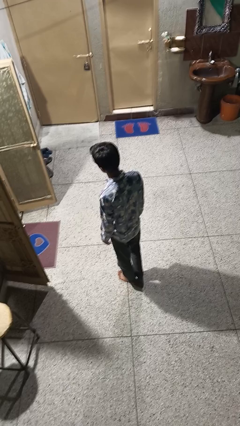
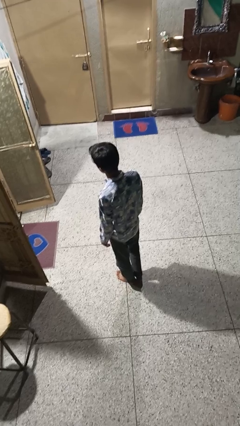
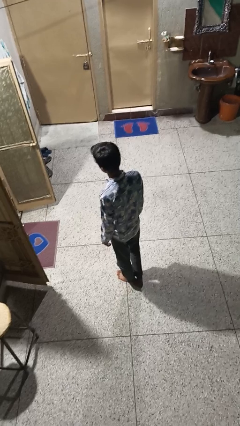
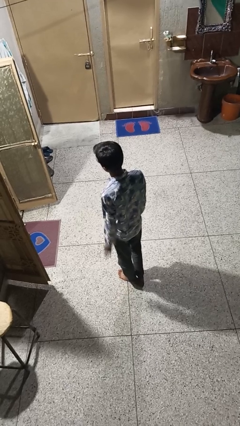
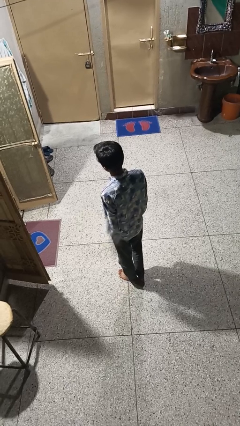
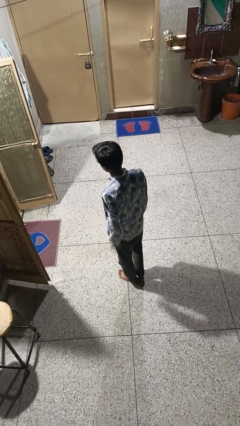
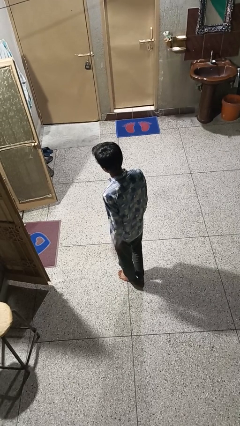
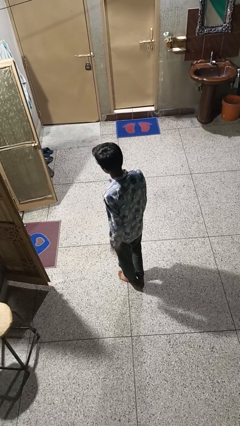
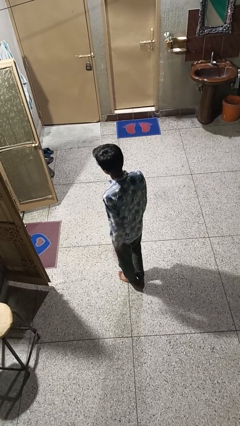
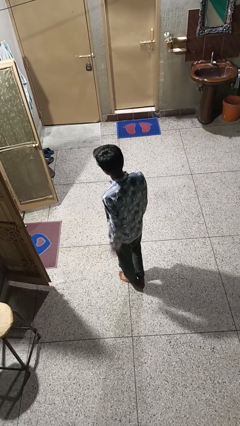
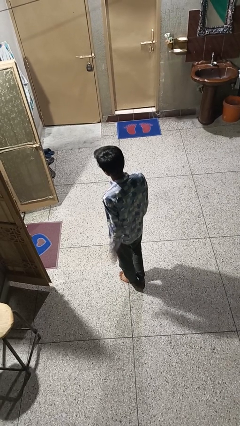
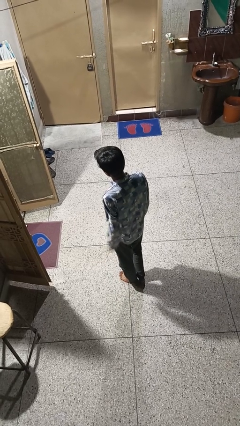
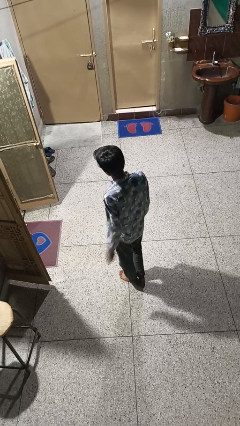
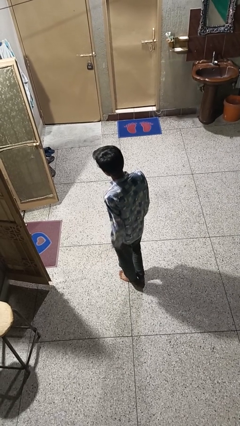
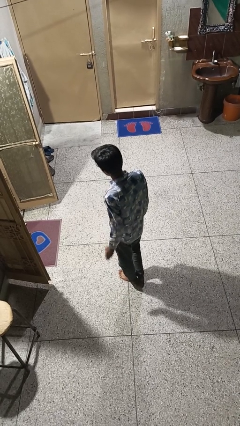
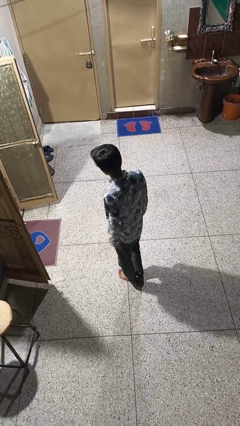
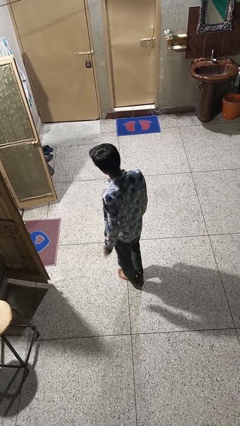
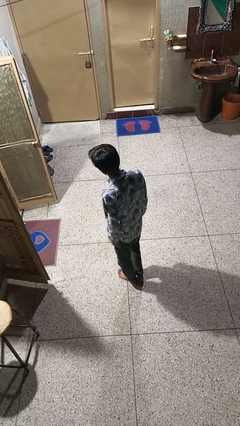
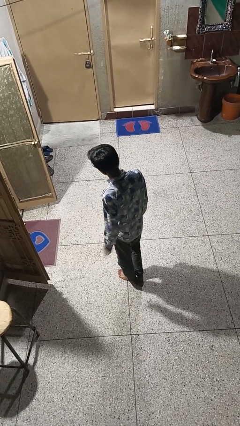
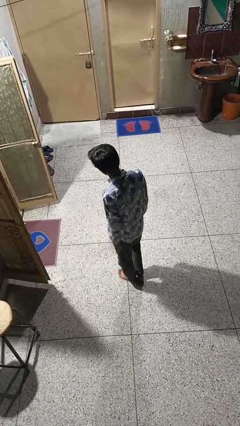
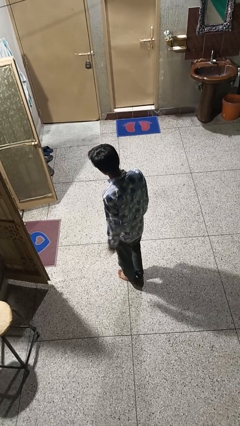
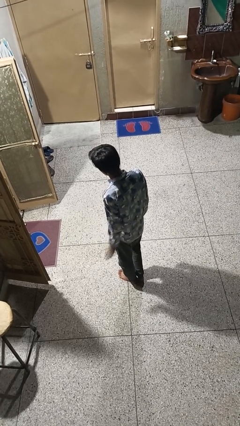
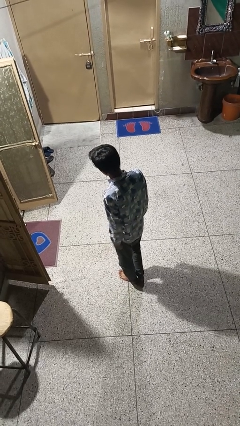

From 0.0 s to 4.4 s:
person slaps hands on thighs

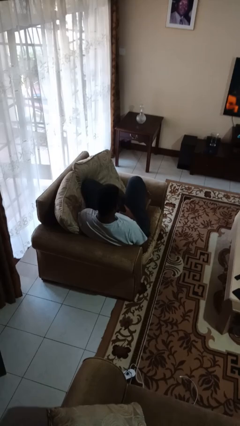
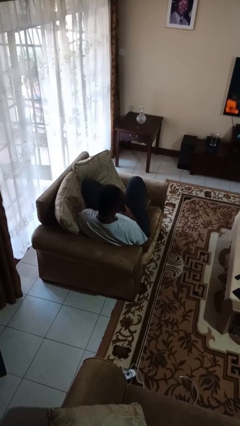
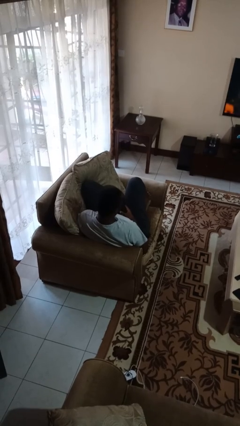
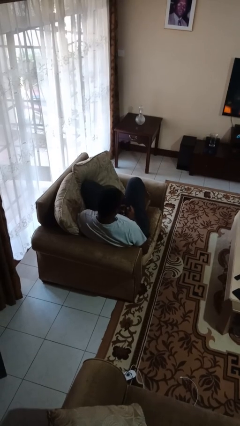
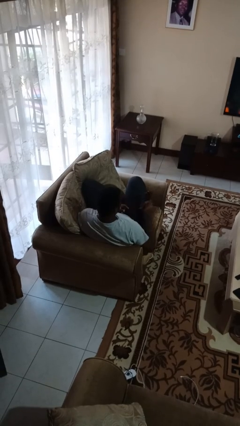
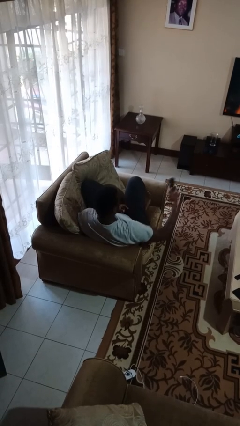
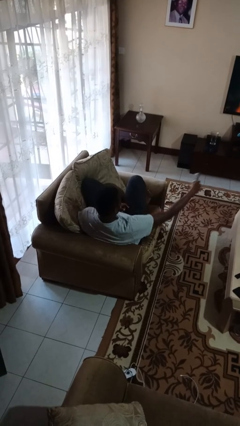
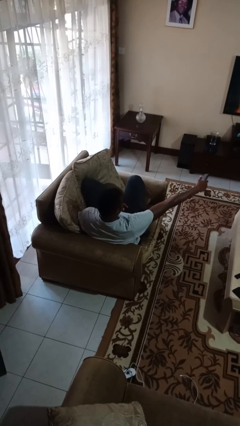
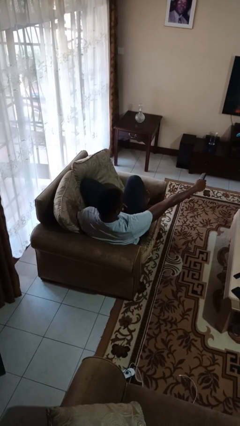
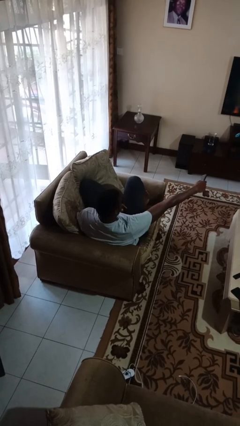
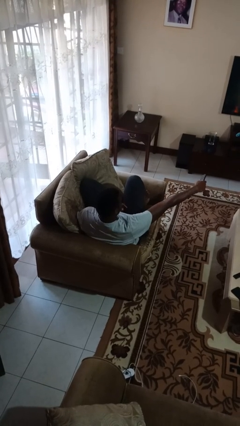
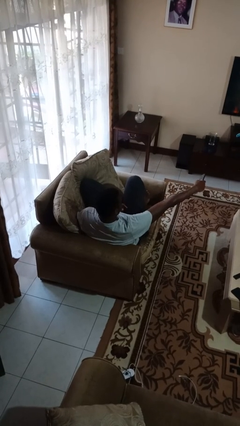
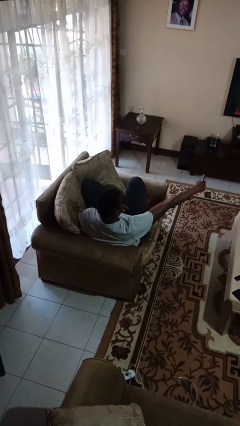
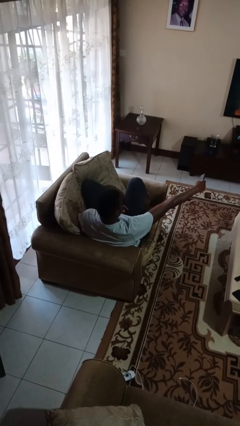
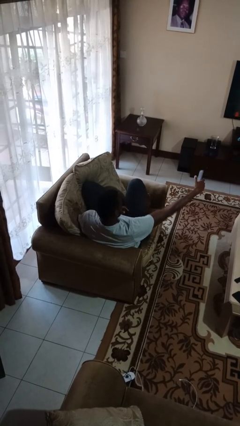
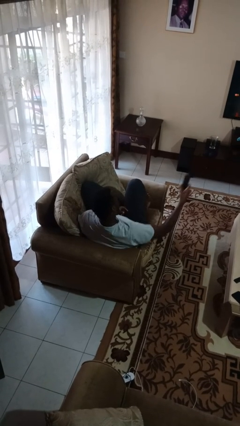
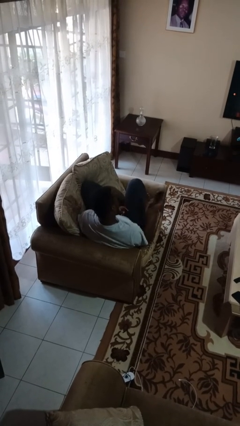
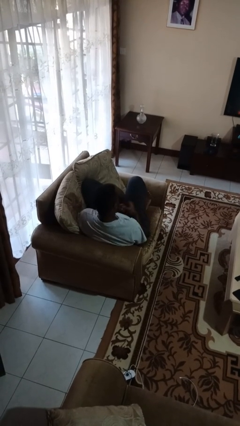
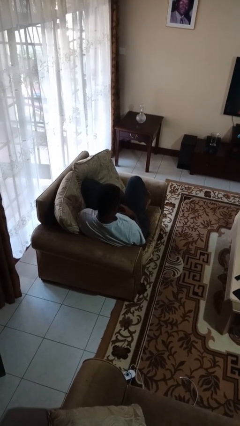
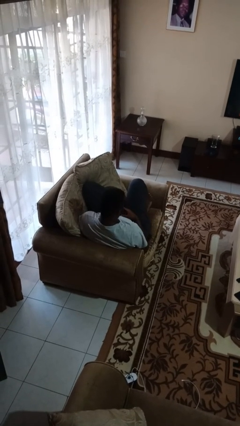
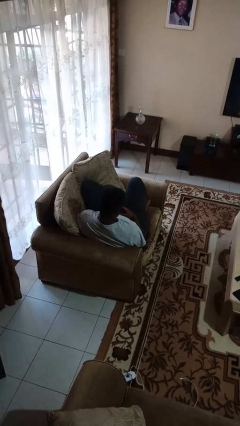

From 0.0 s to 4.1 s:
person uses television remote

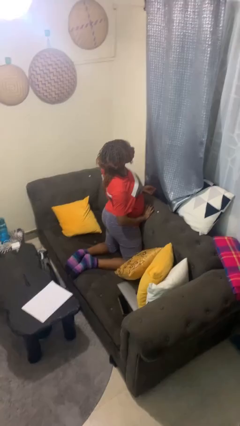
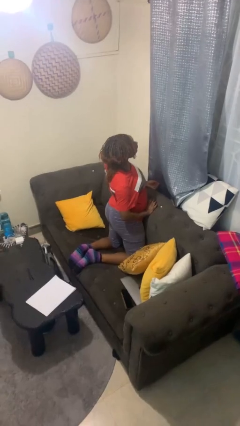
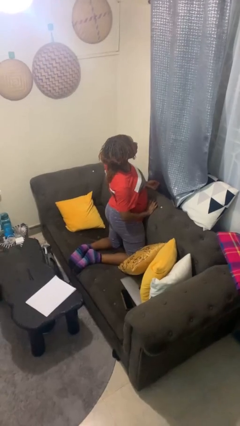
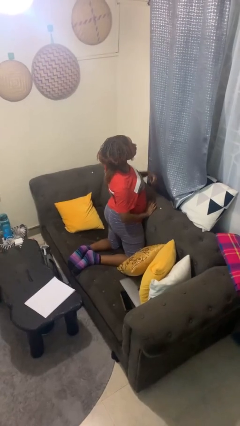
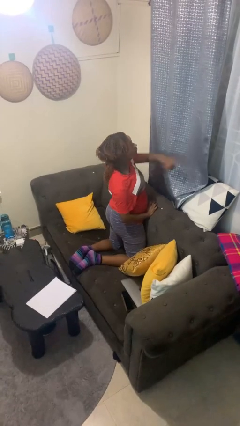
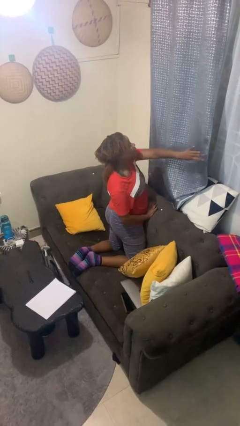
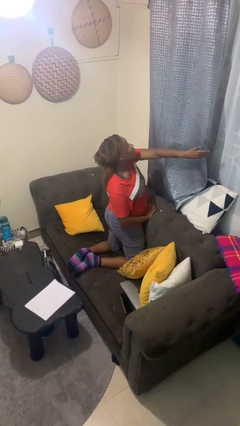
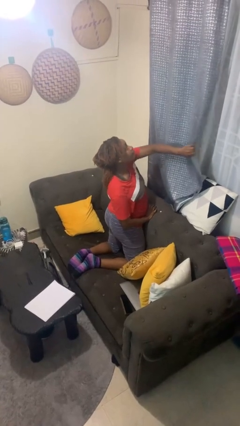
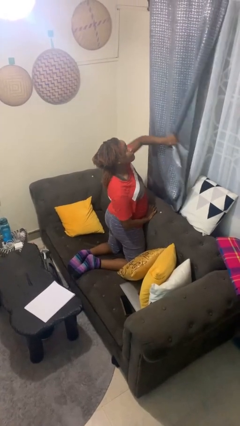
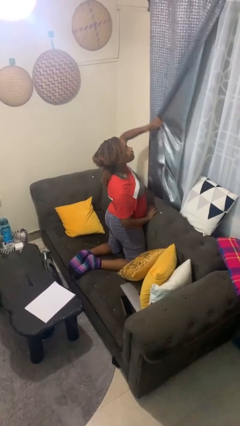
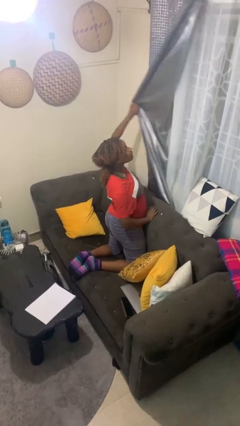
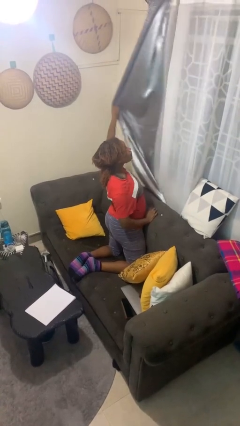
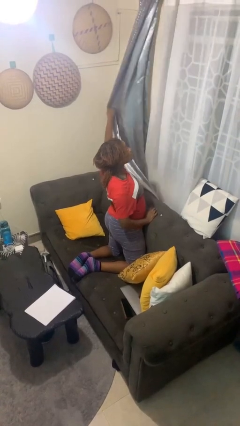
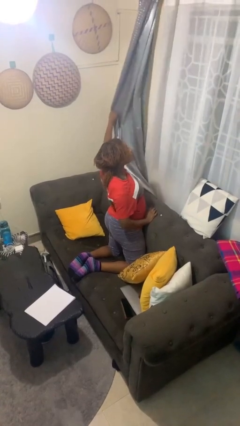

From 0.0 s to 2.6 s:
person opens curtains

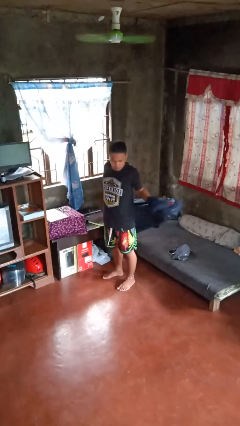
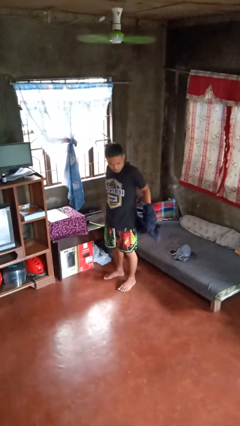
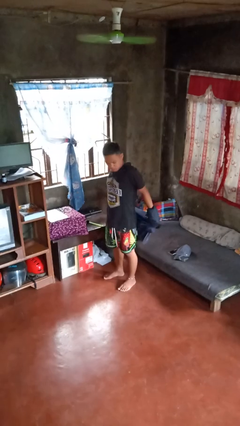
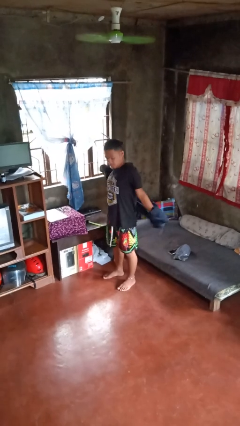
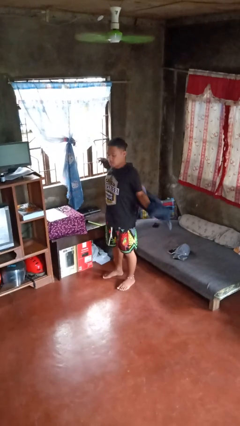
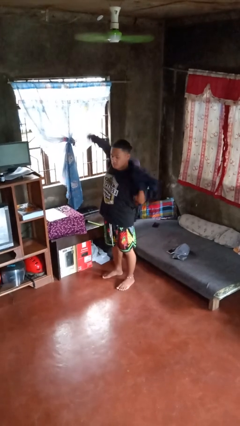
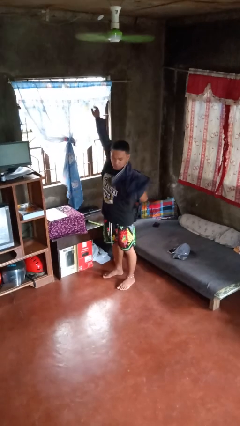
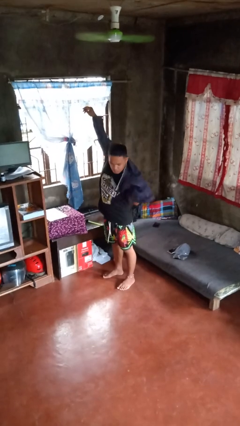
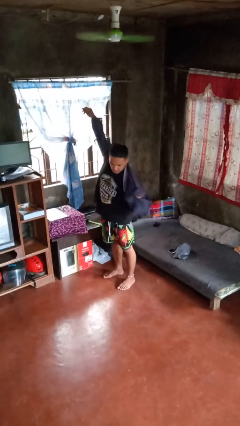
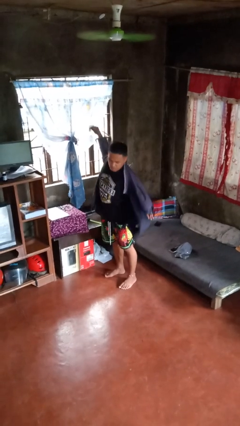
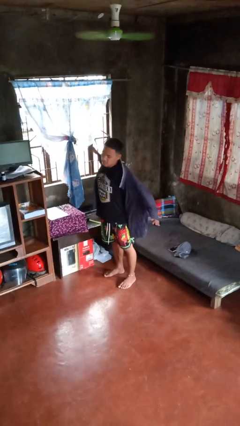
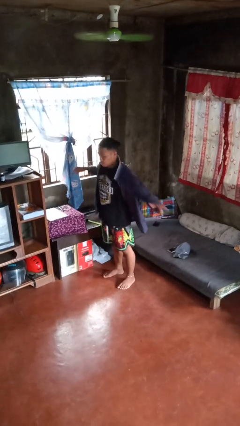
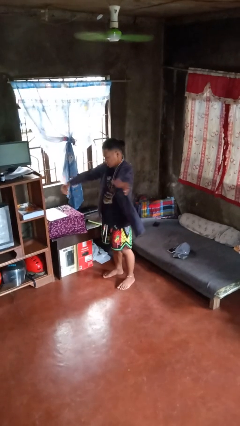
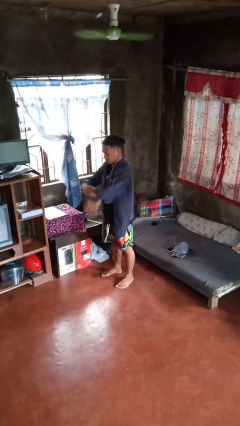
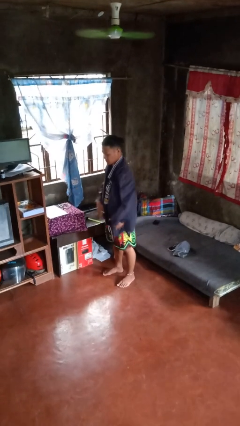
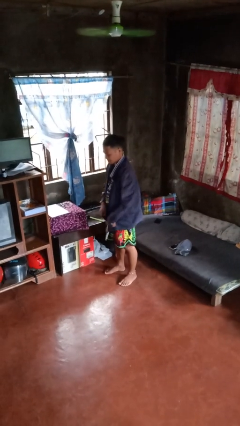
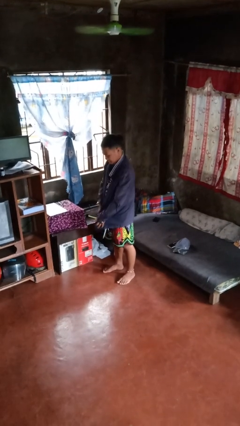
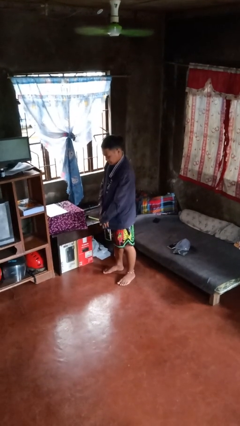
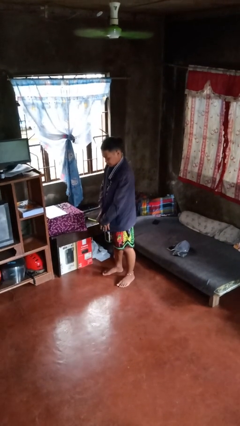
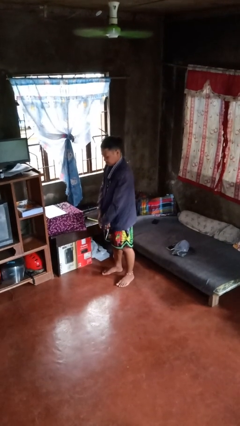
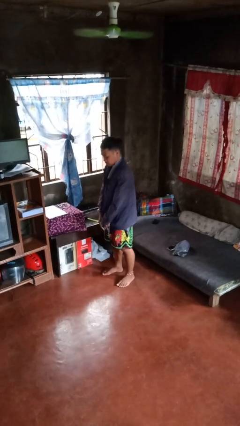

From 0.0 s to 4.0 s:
person puts on jacket

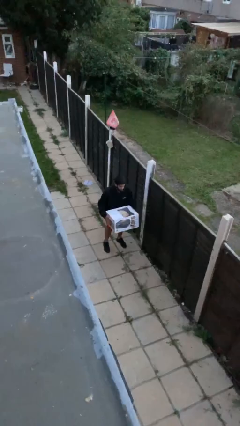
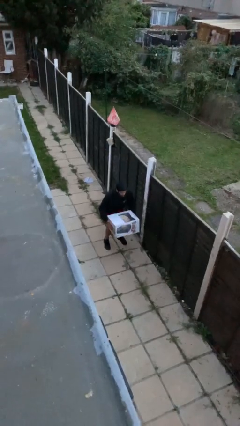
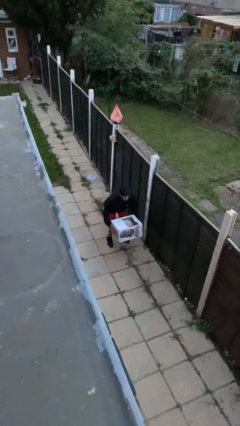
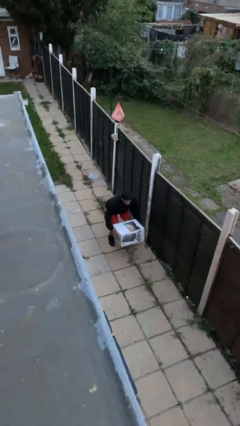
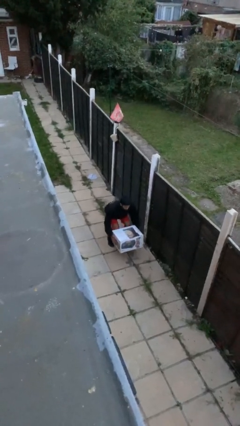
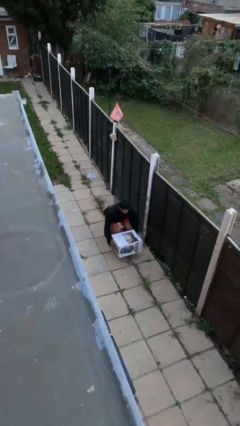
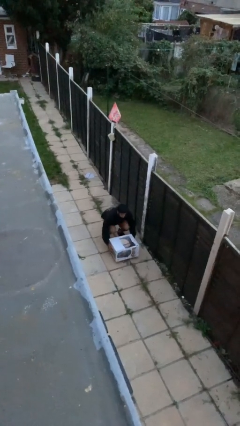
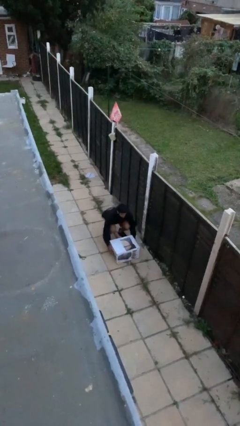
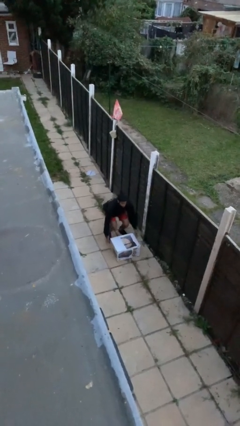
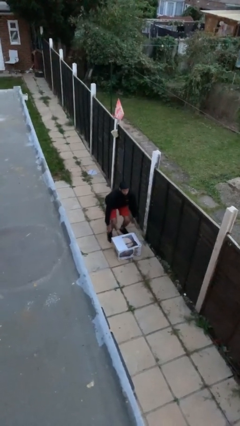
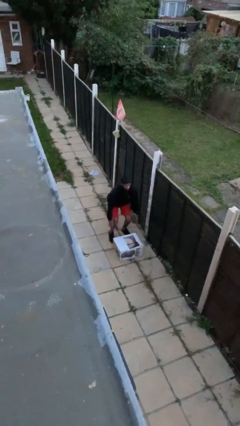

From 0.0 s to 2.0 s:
person puts down object on floor

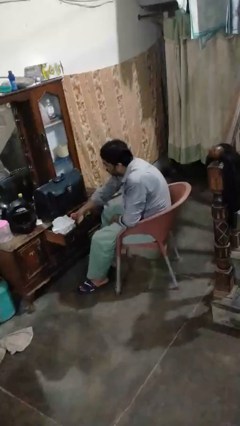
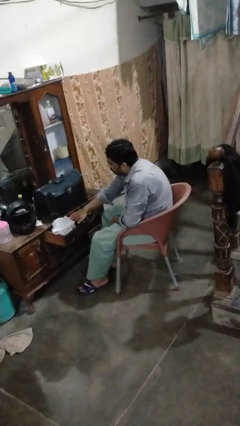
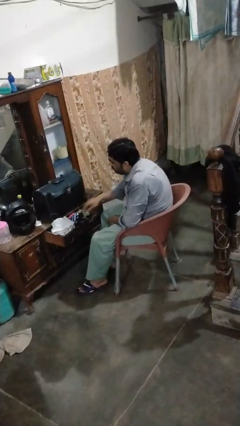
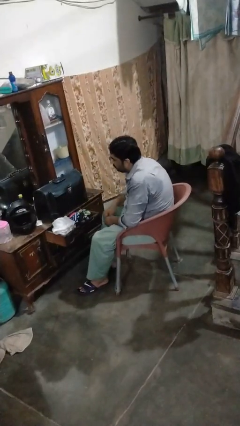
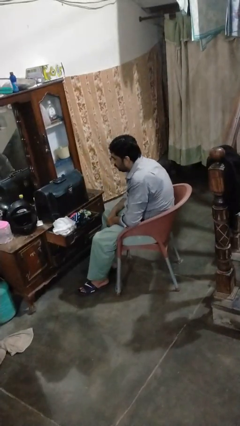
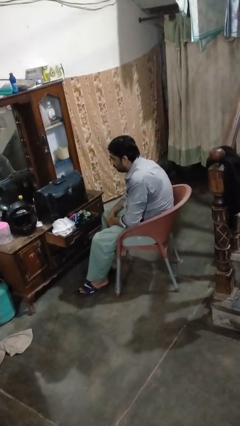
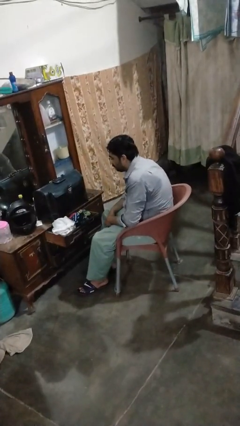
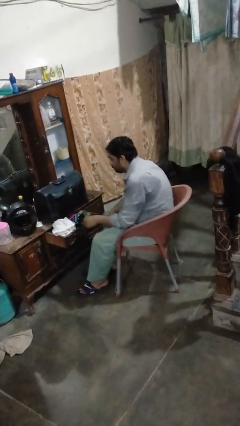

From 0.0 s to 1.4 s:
person puts clothes into dresser
